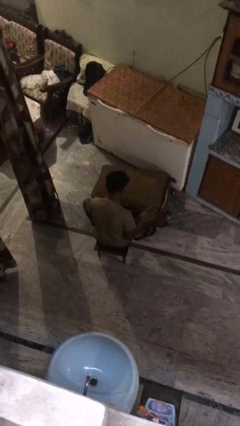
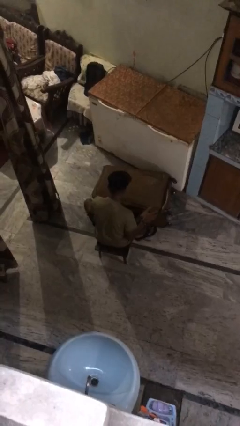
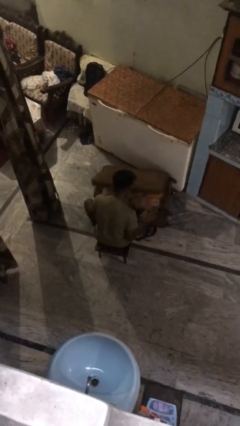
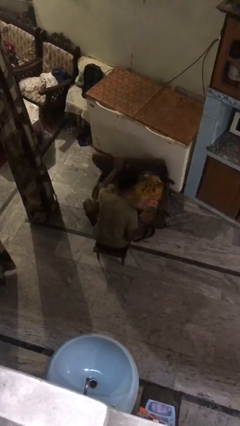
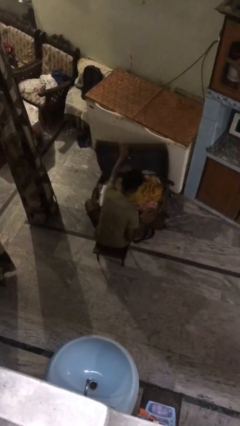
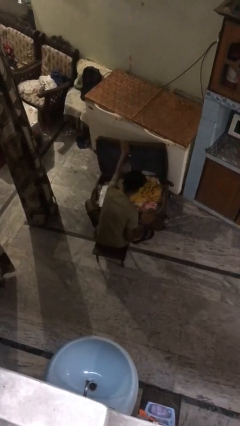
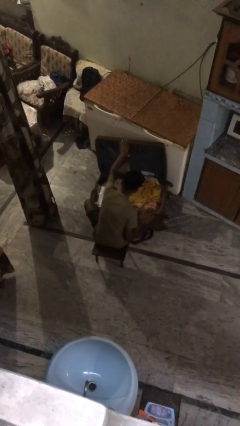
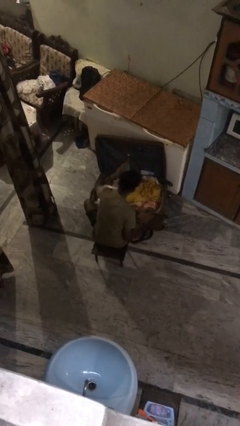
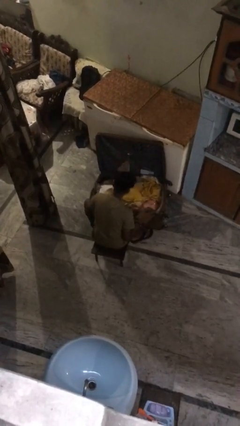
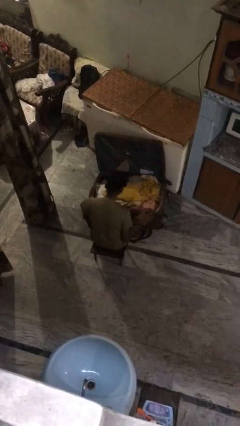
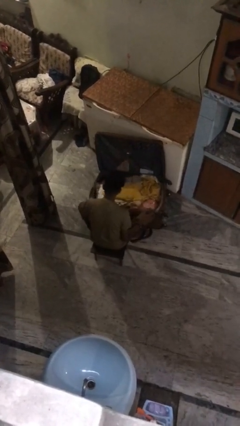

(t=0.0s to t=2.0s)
person opens suitcase

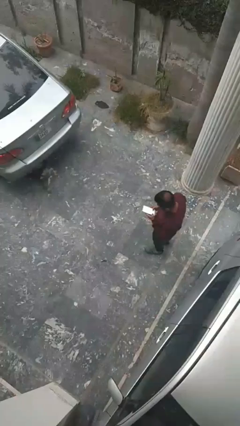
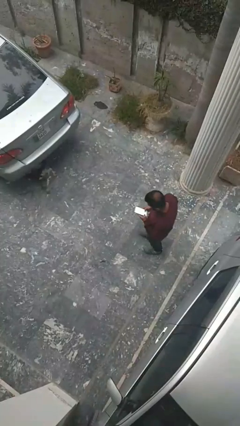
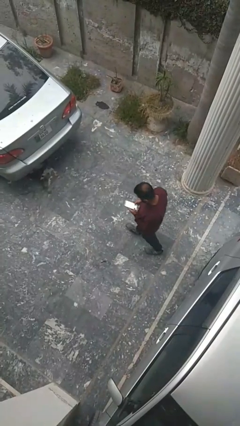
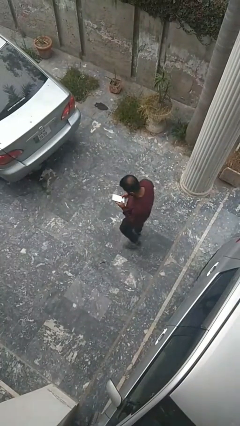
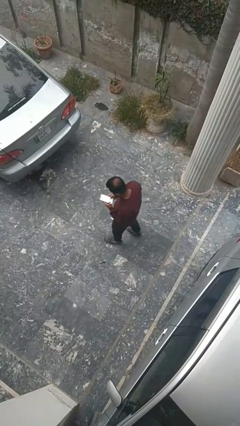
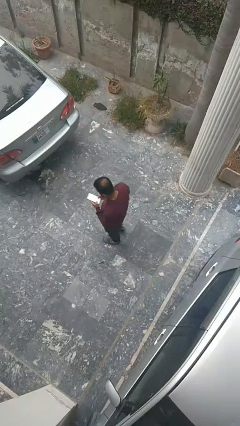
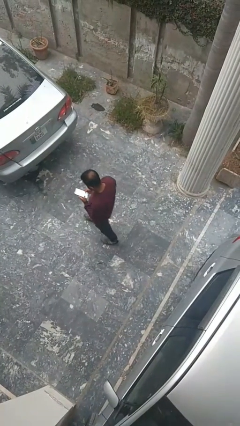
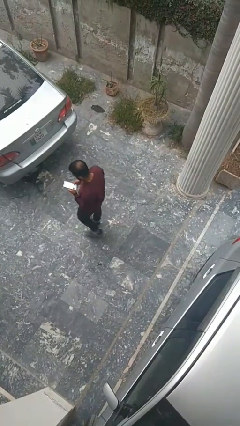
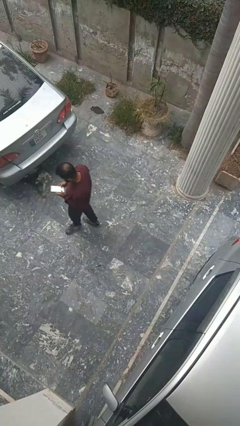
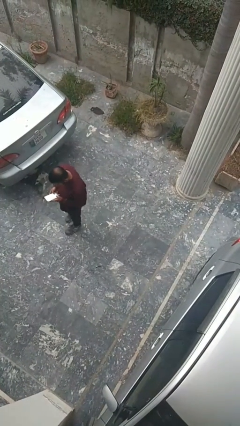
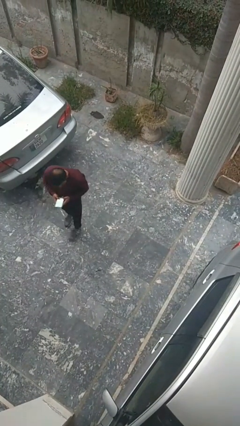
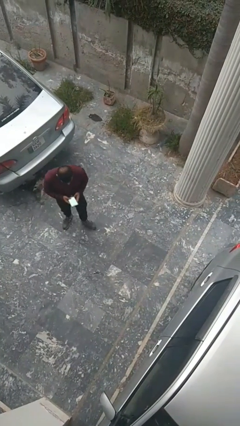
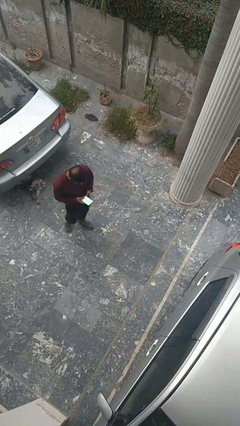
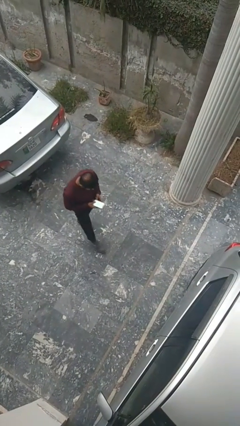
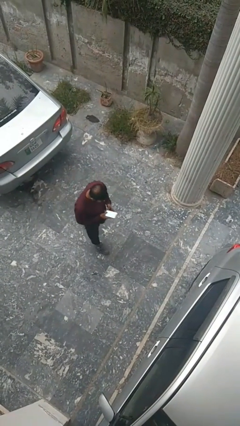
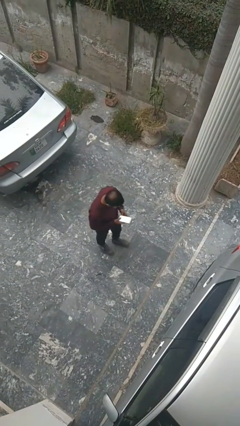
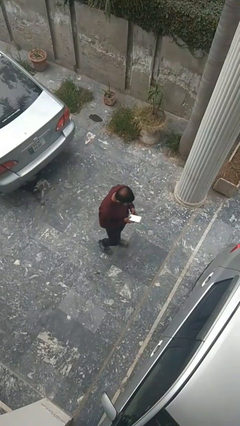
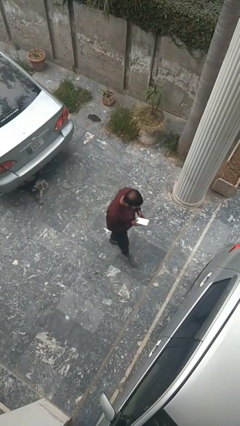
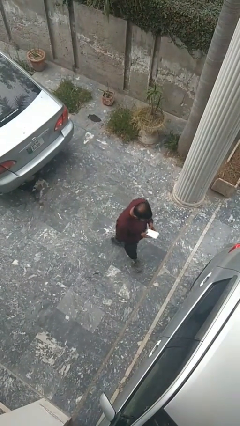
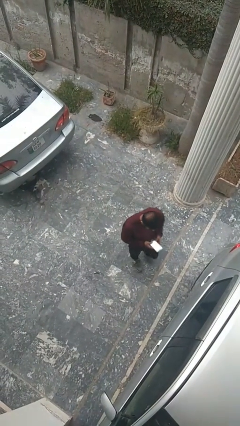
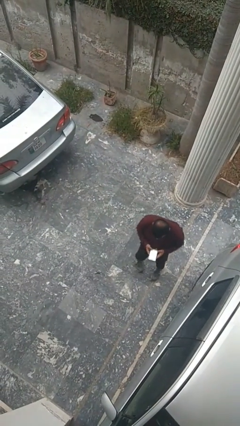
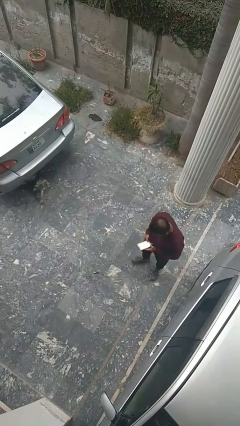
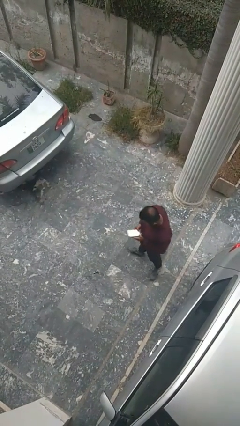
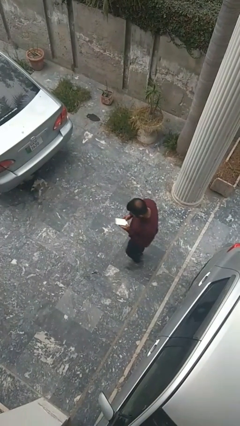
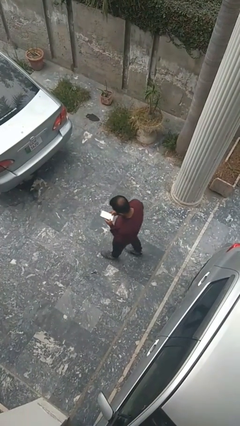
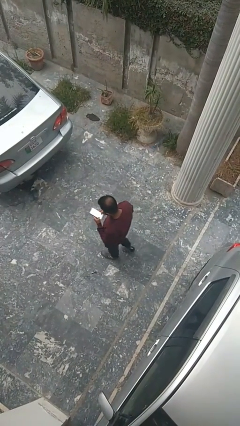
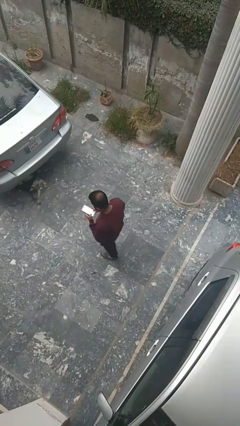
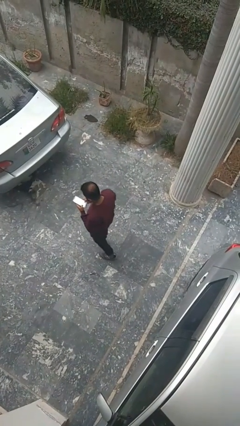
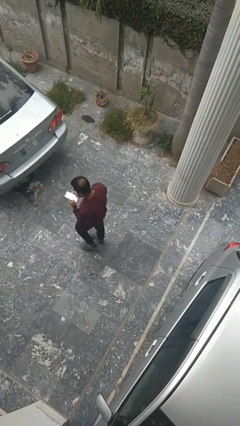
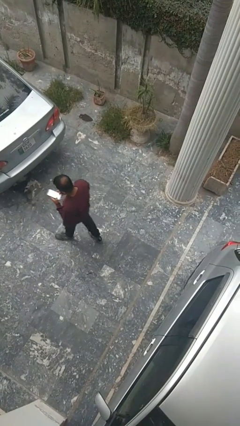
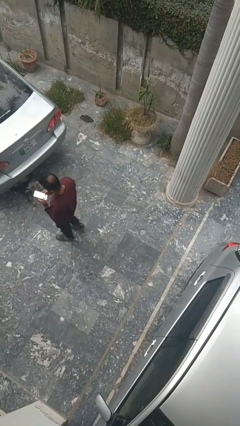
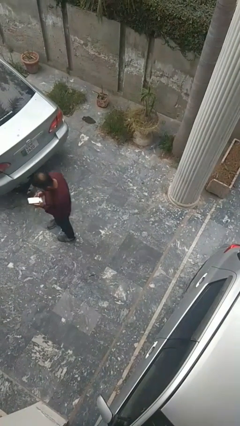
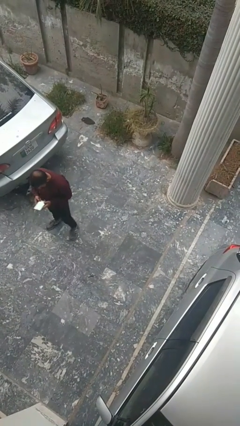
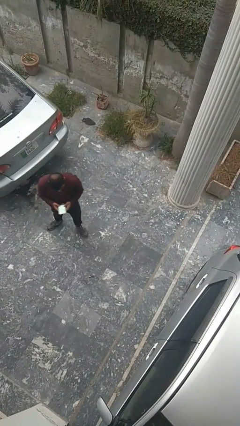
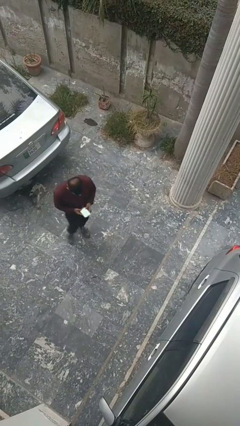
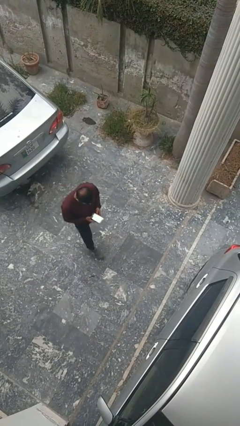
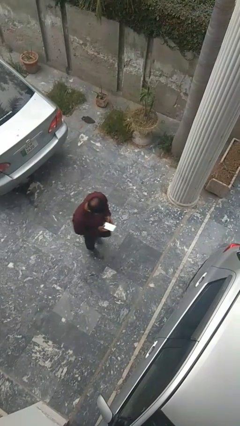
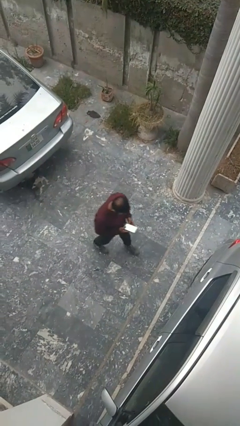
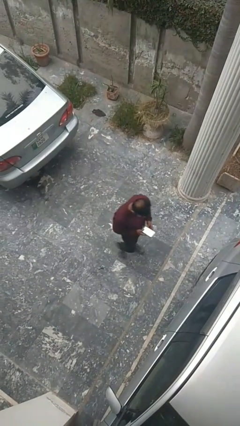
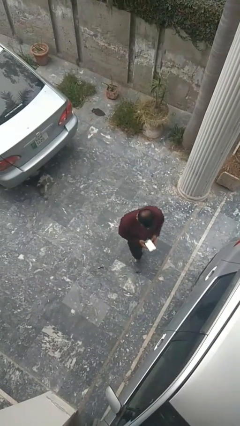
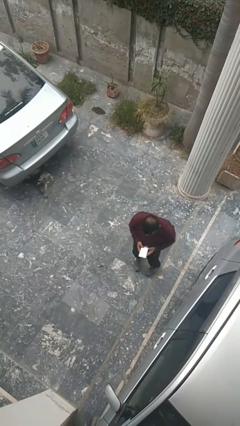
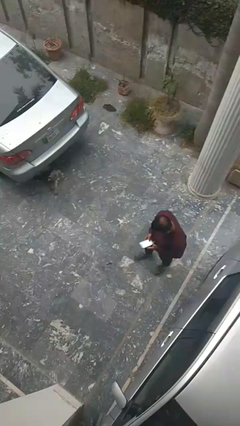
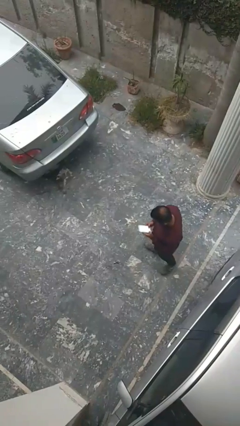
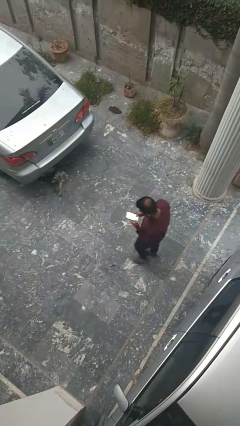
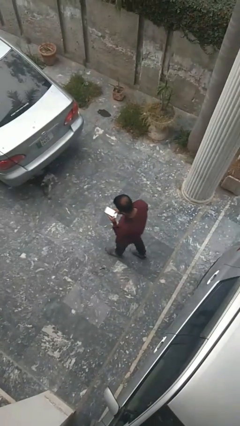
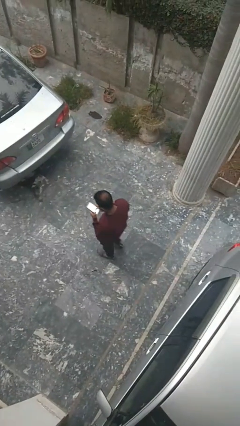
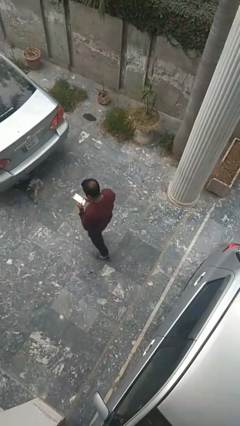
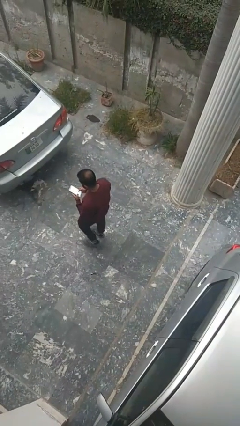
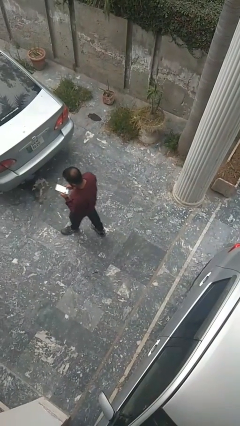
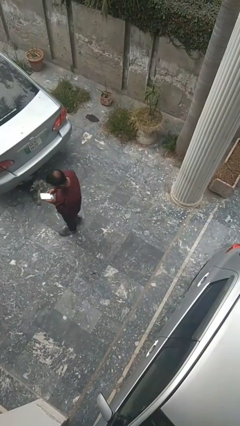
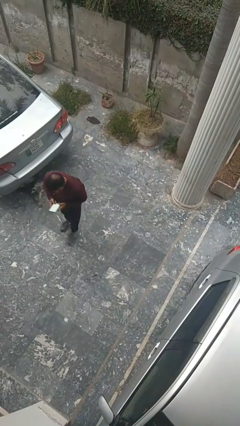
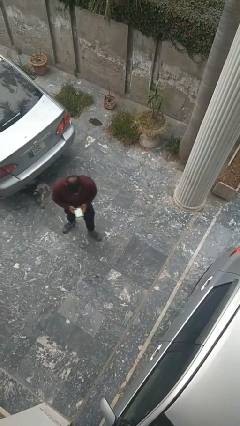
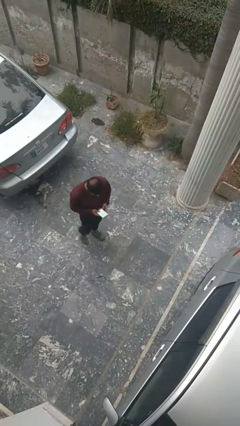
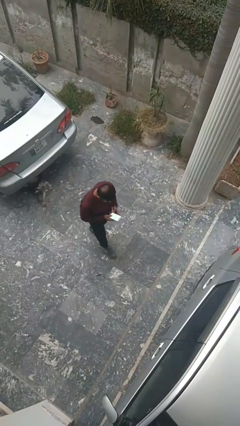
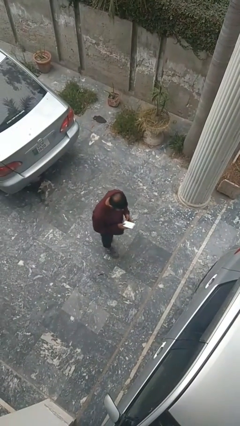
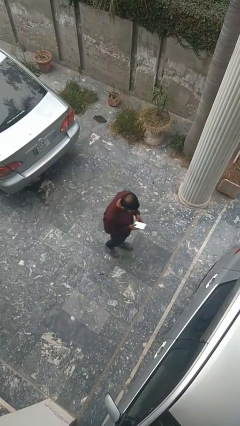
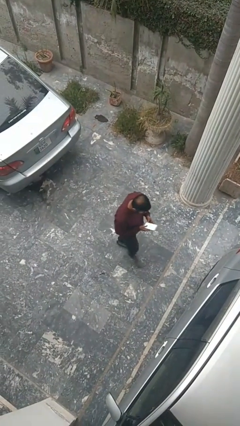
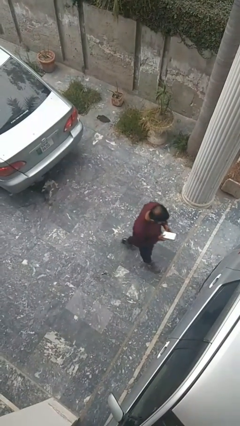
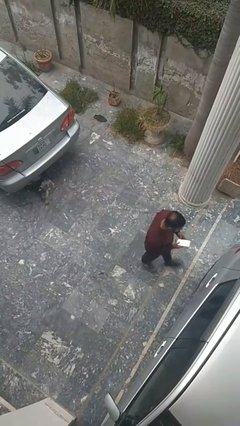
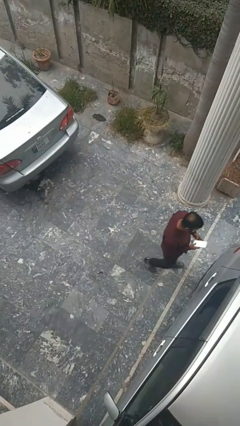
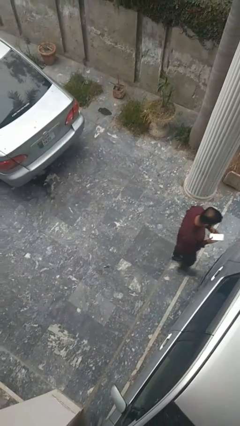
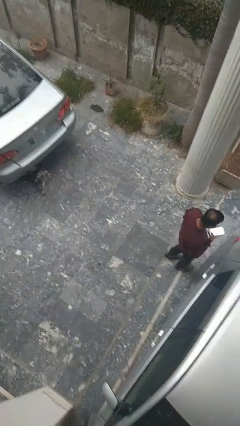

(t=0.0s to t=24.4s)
person texts on phone

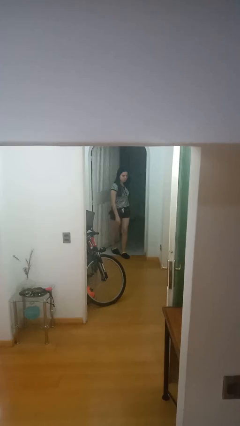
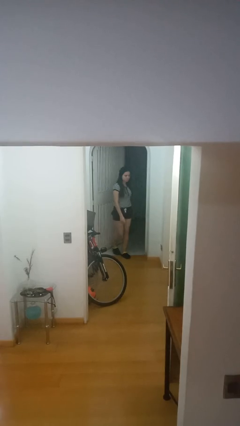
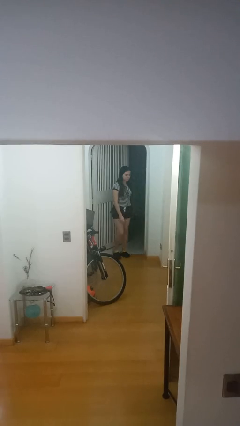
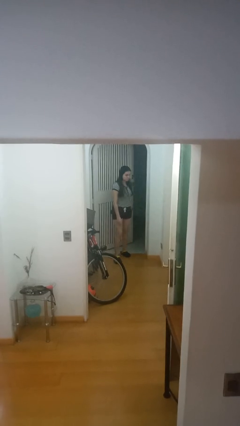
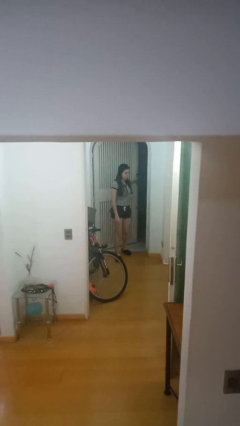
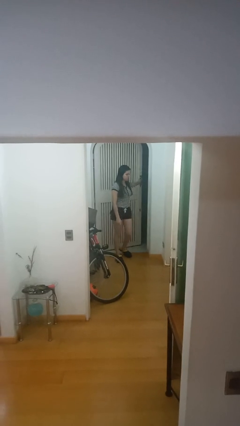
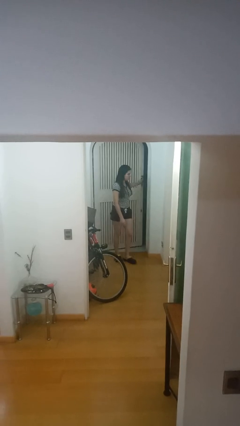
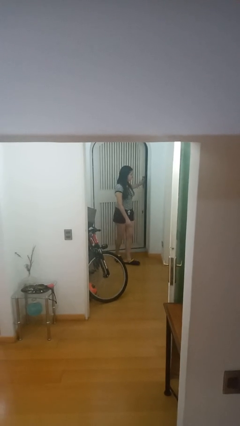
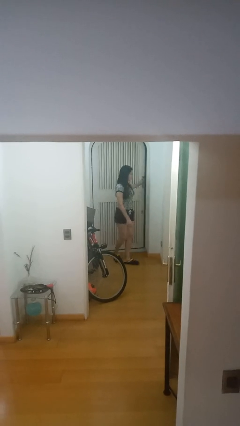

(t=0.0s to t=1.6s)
person closes facility door

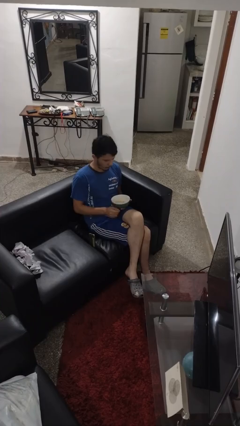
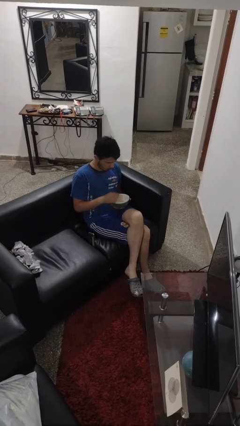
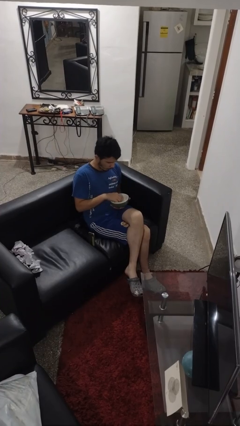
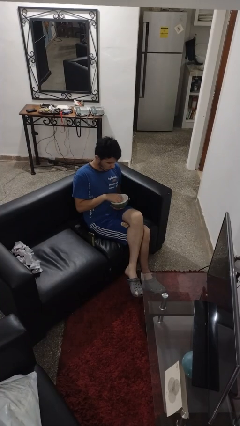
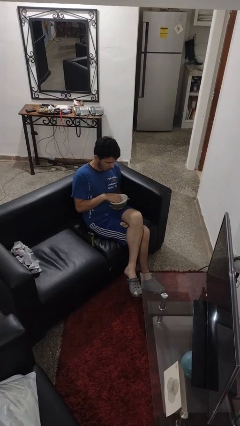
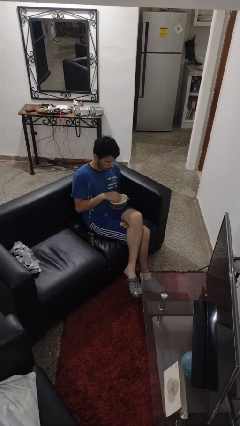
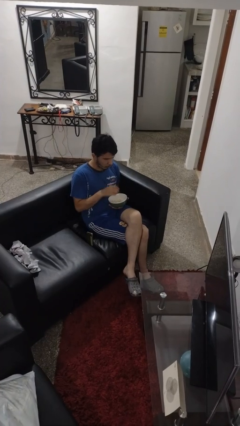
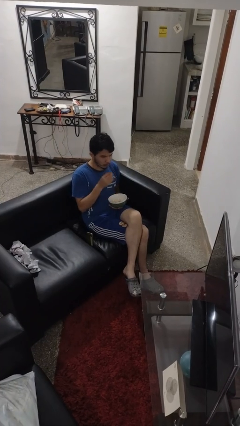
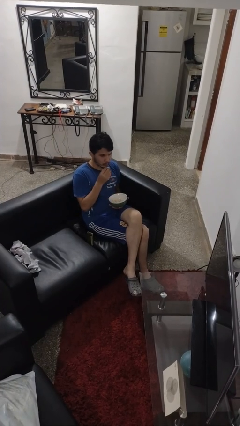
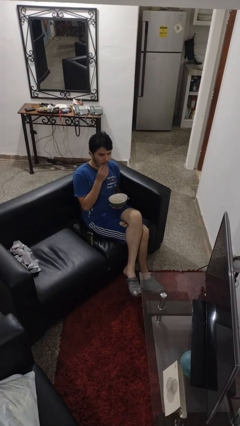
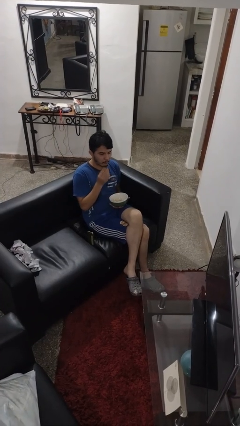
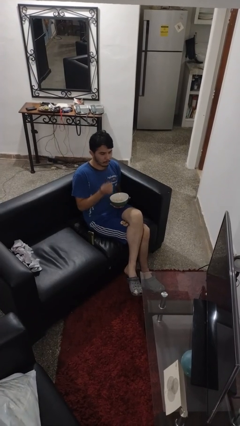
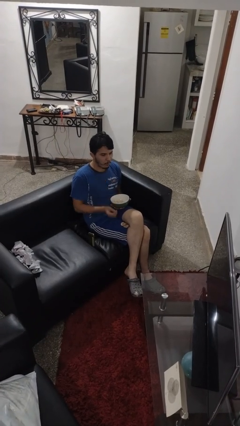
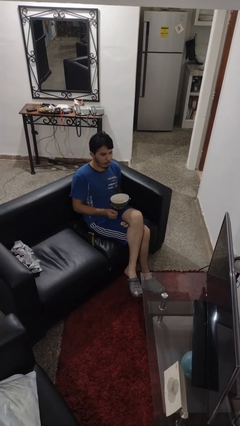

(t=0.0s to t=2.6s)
person eats with hands
